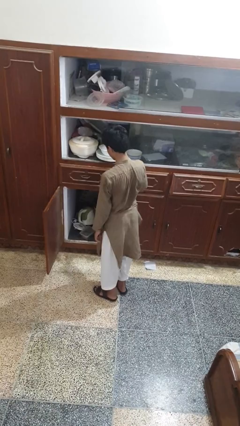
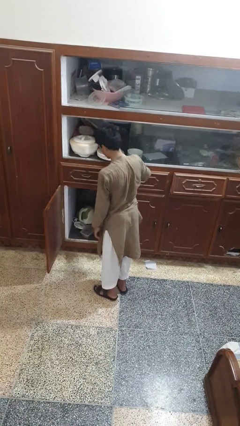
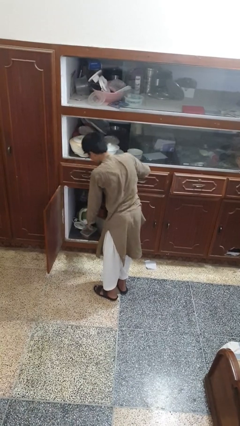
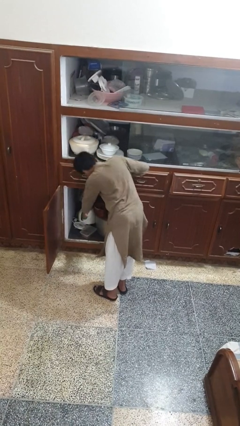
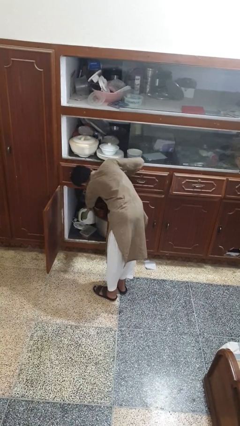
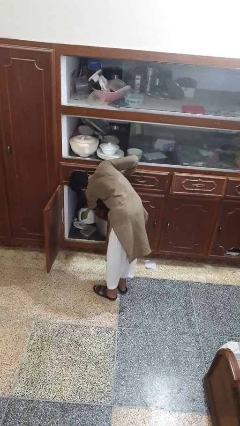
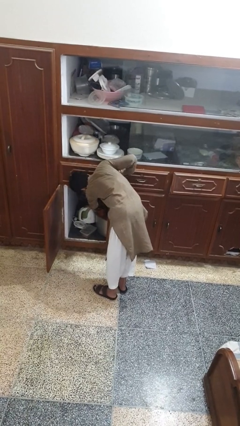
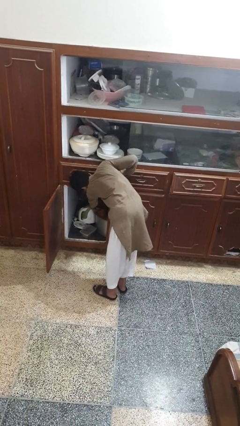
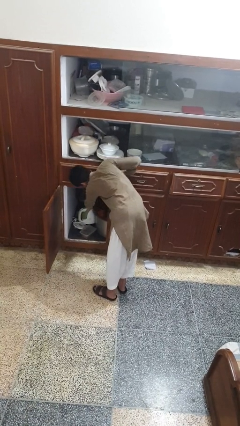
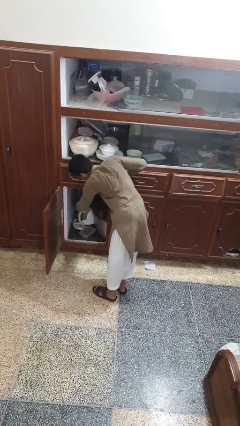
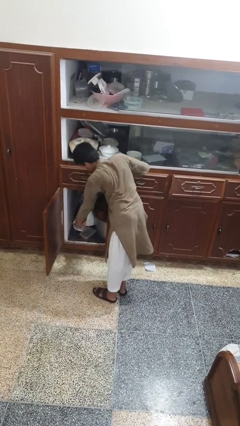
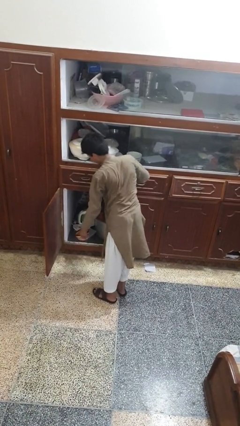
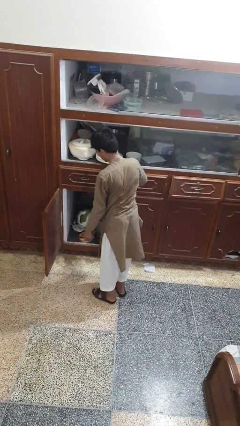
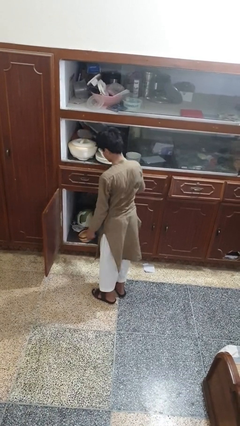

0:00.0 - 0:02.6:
person takes object from cabinet

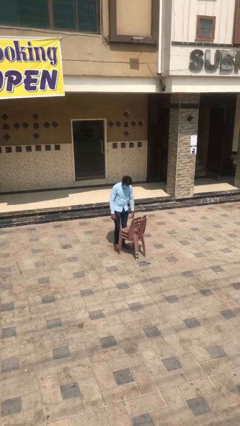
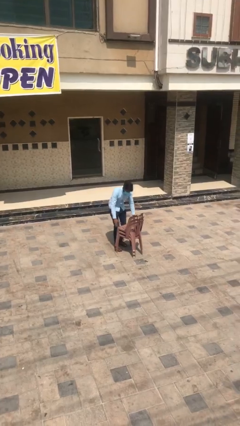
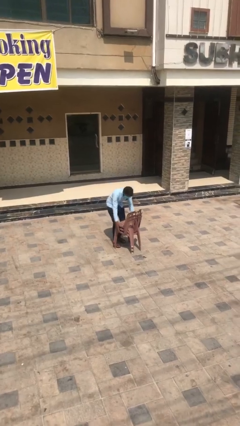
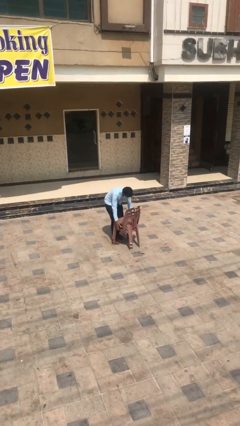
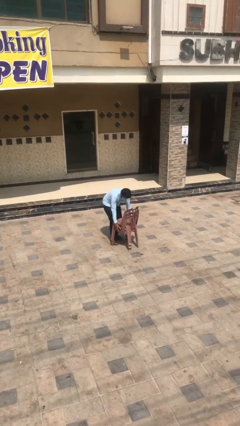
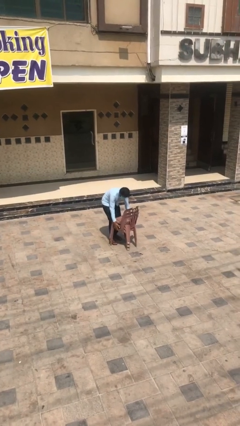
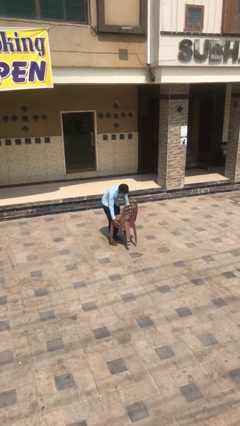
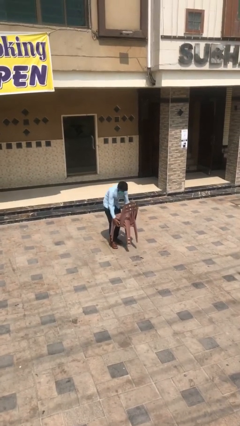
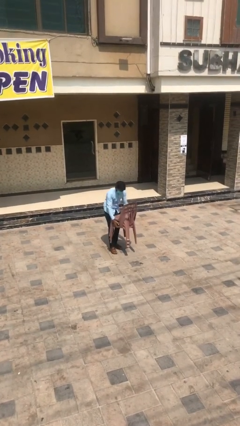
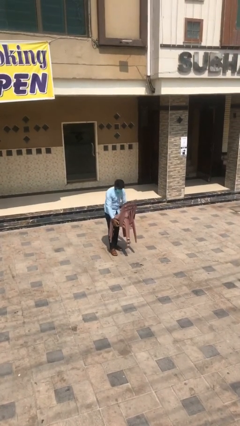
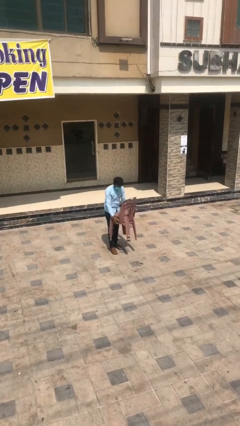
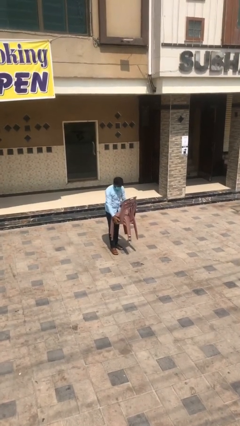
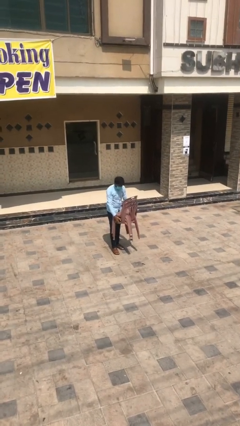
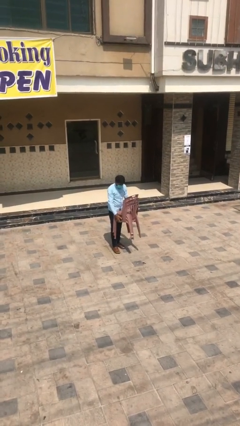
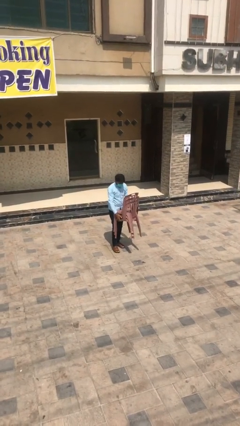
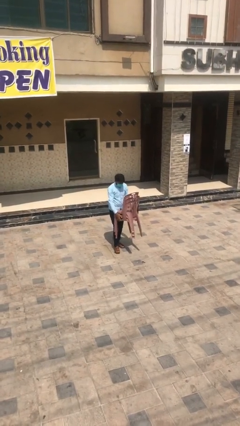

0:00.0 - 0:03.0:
person picks up object from floor

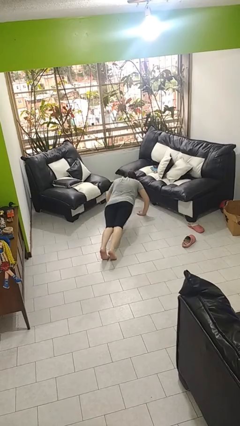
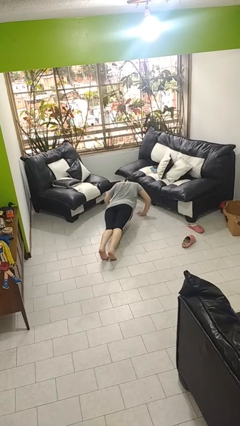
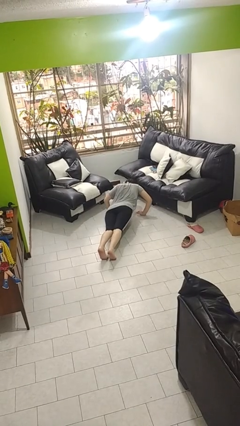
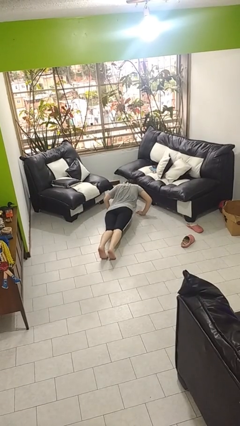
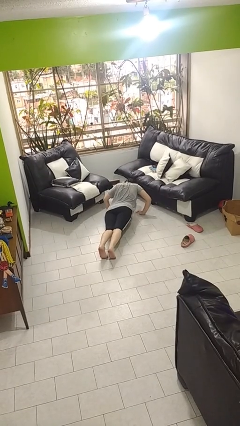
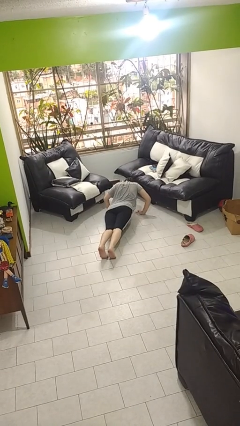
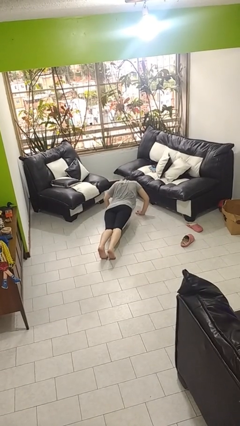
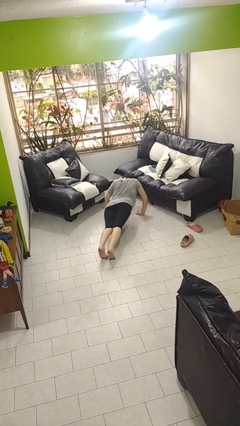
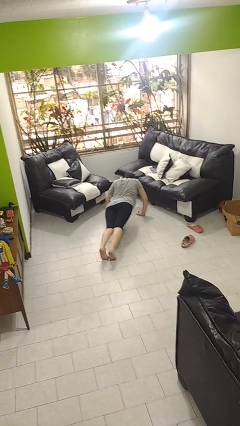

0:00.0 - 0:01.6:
person exercises with pushup

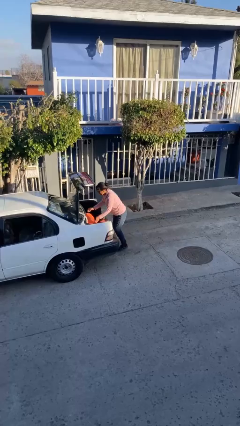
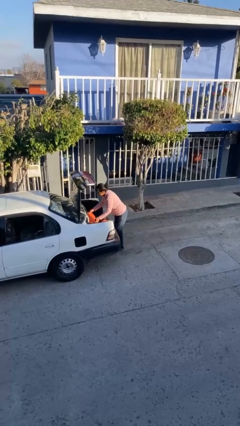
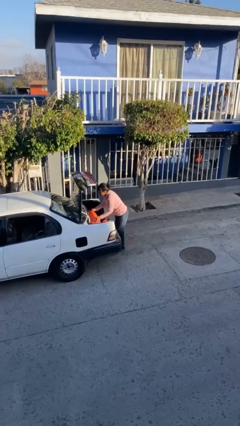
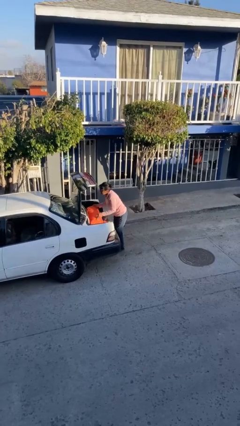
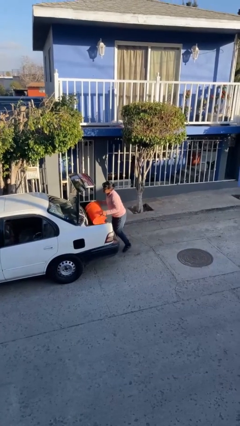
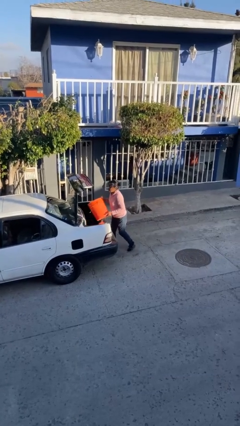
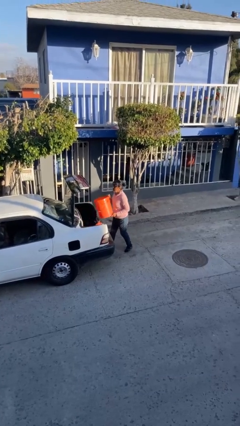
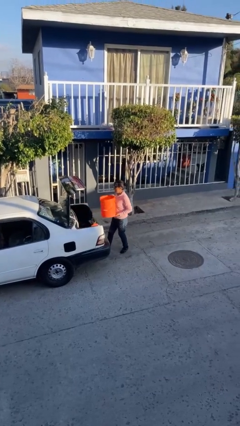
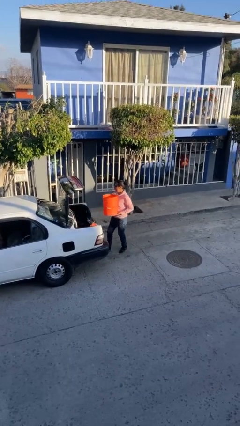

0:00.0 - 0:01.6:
person unloads car

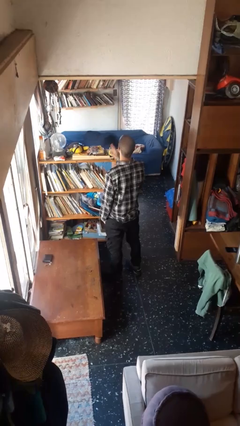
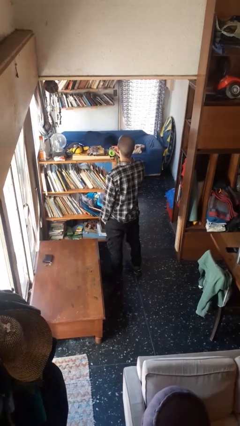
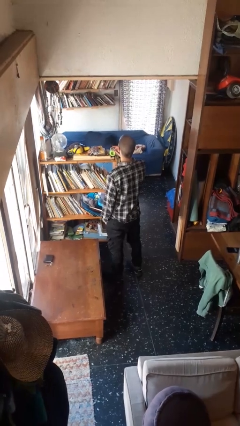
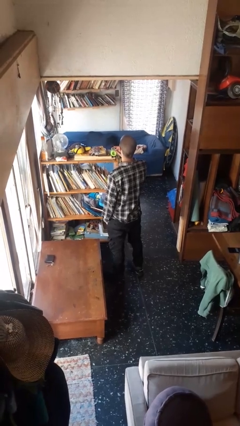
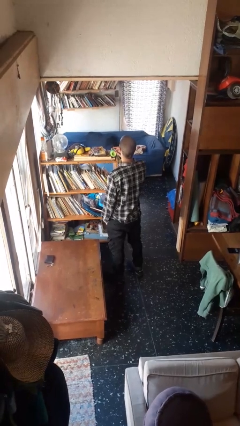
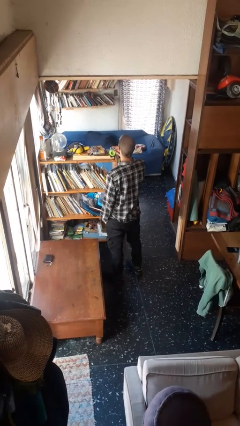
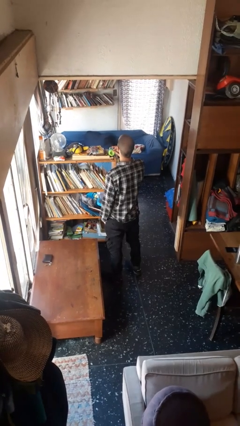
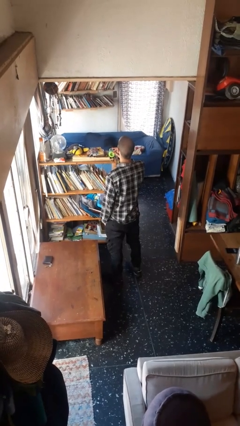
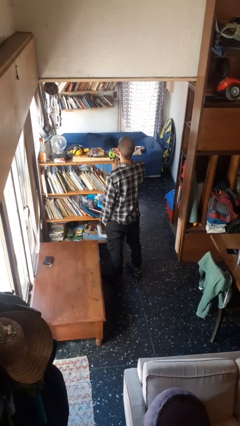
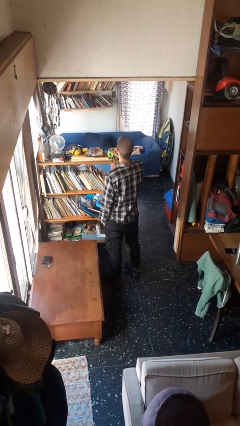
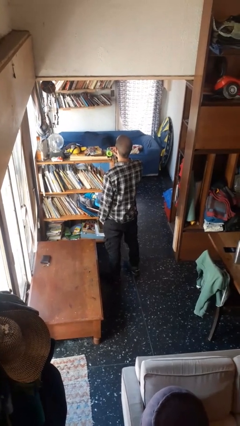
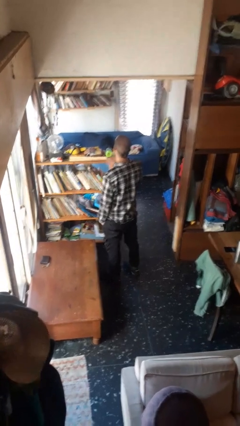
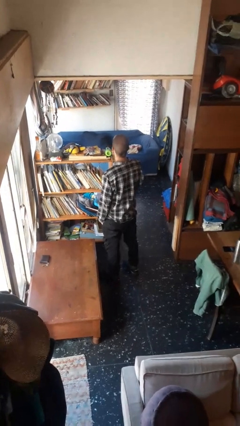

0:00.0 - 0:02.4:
person gestures be quiet

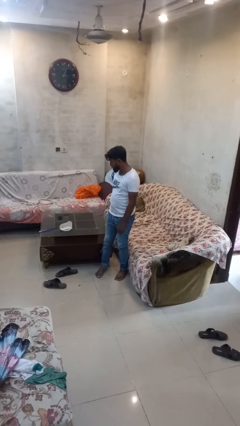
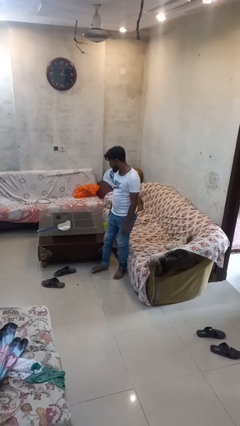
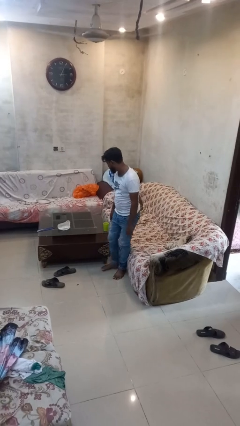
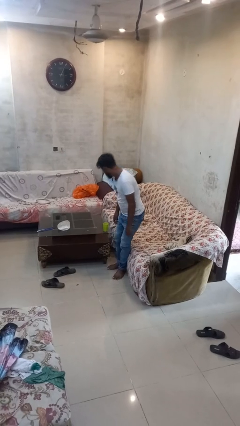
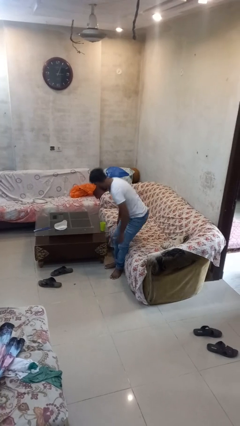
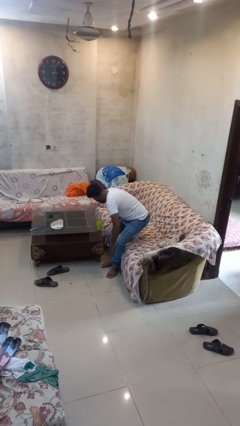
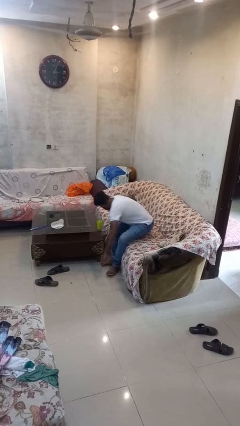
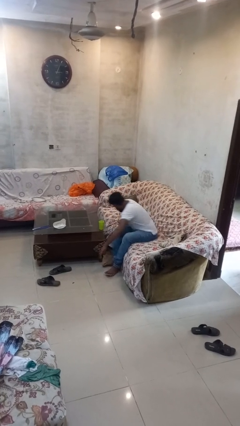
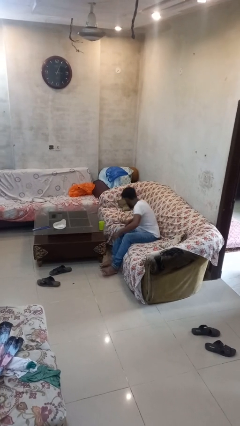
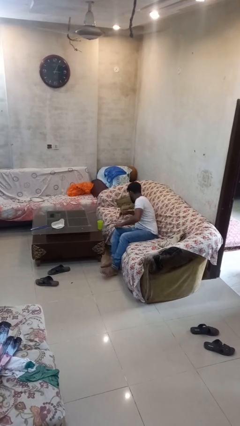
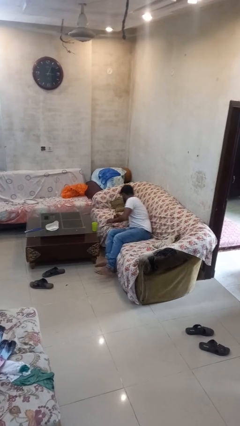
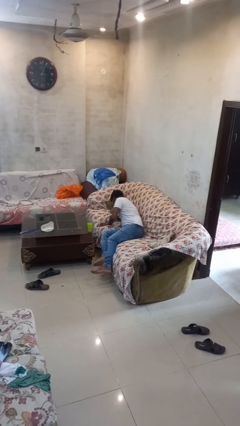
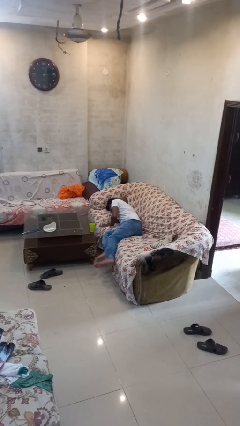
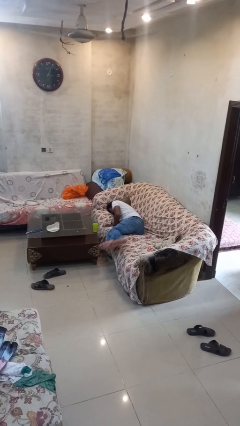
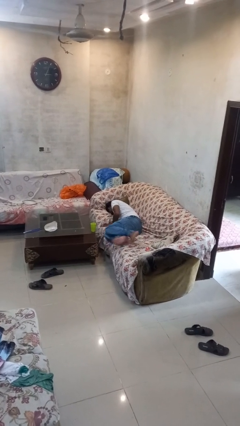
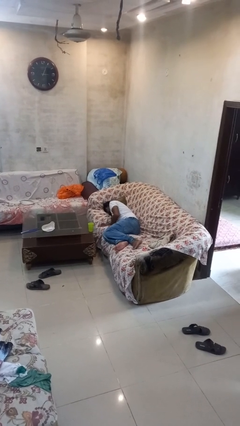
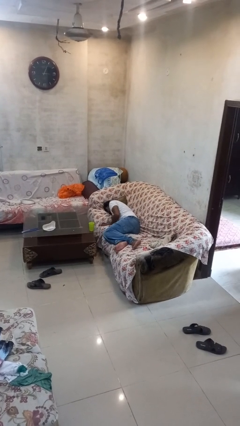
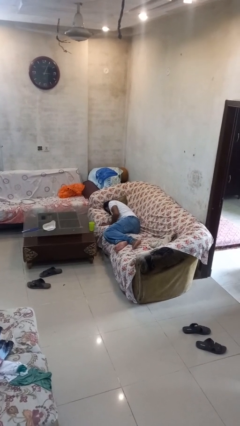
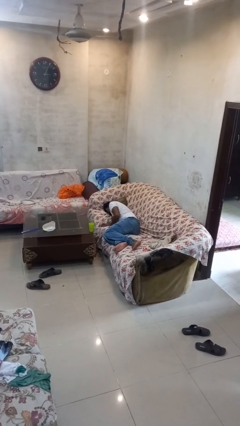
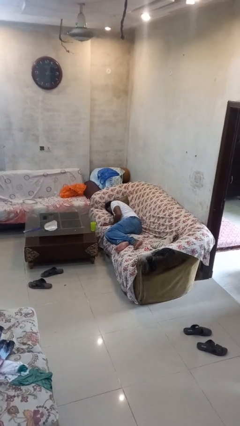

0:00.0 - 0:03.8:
person lies down on couch

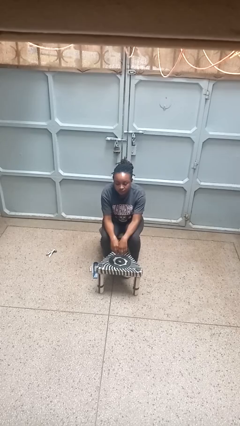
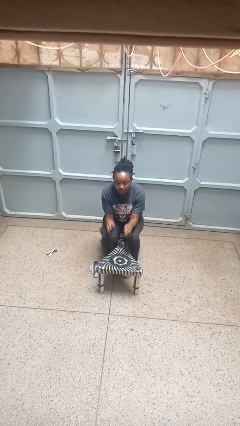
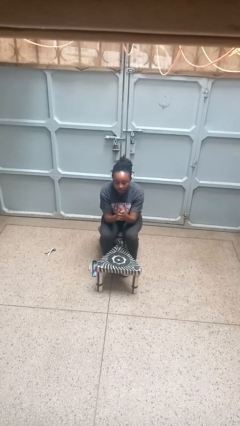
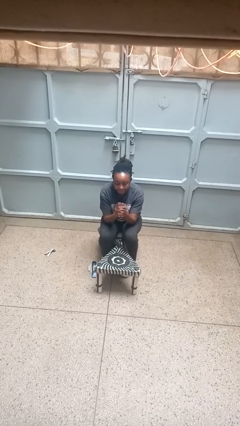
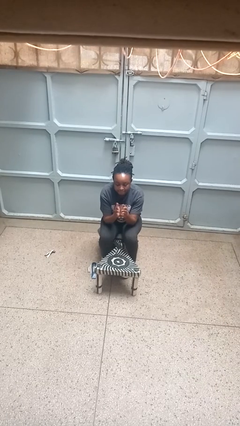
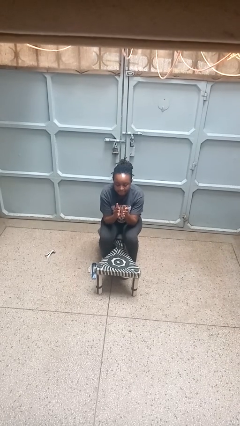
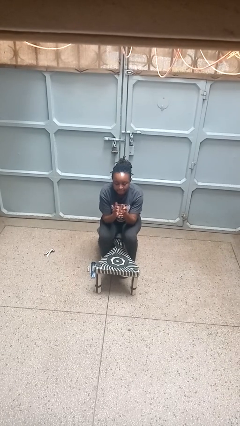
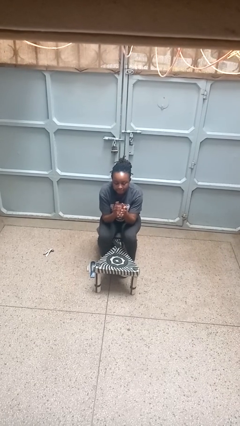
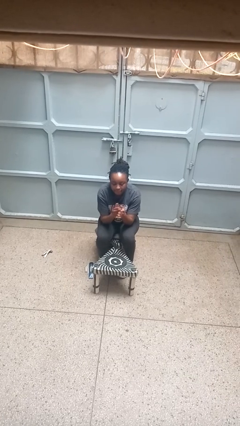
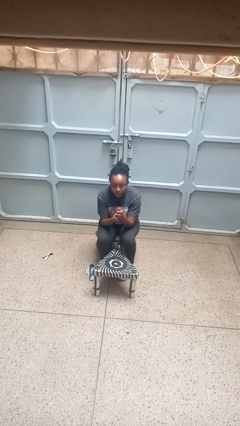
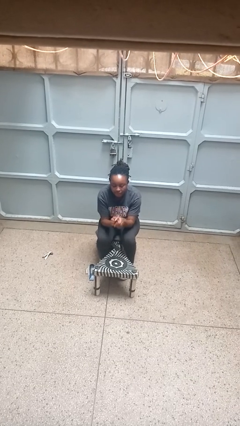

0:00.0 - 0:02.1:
person claps hands

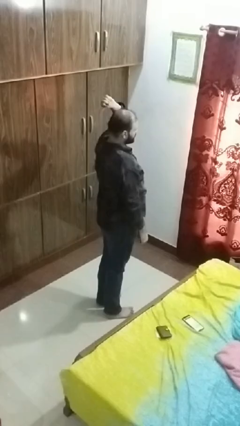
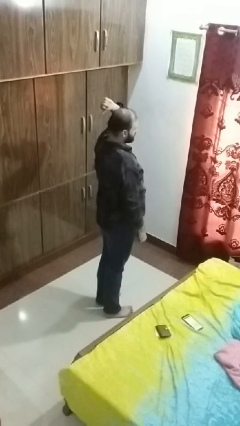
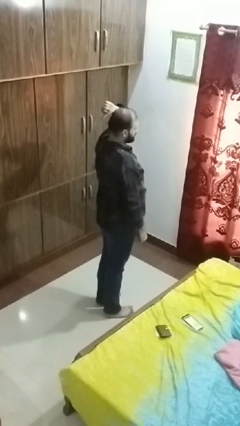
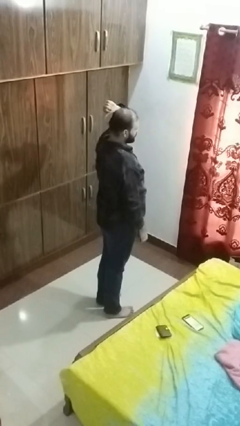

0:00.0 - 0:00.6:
person gestures behind me
